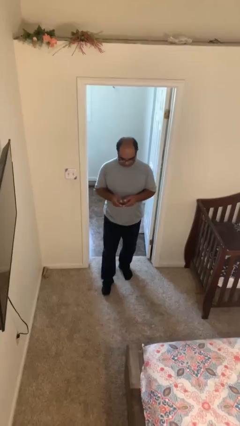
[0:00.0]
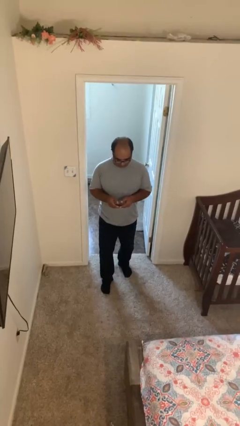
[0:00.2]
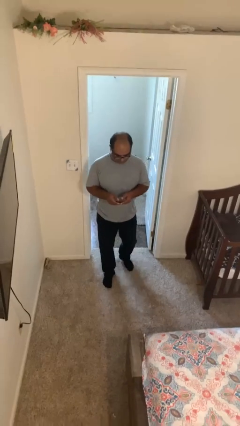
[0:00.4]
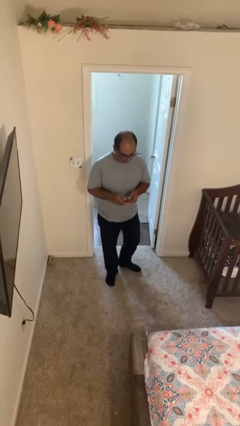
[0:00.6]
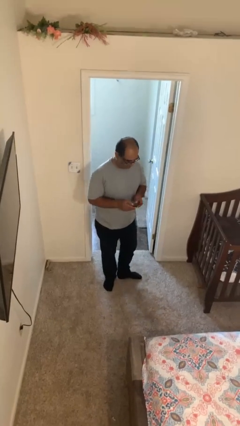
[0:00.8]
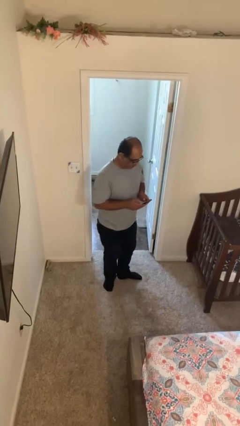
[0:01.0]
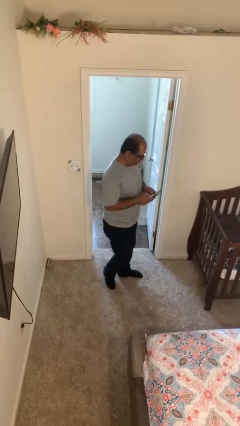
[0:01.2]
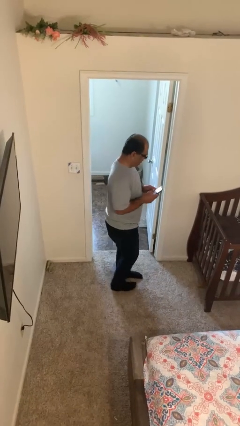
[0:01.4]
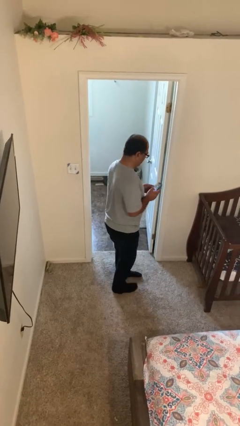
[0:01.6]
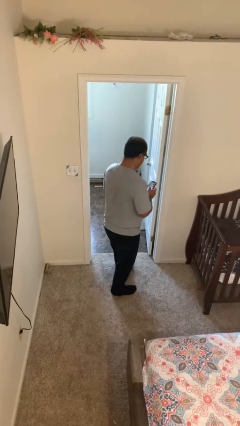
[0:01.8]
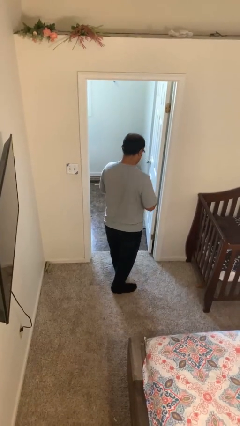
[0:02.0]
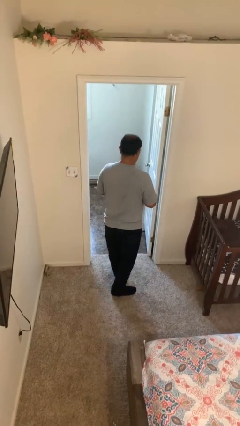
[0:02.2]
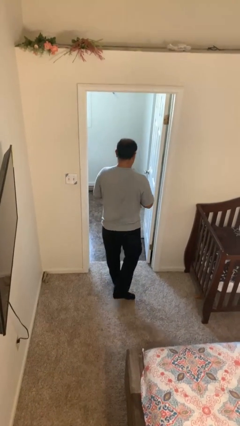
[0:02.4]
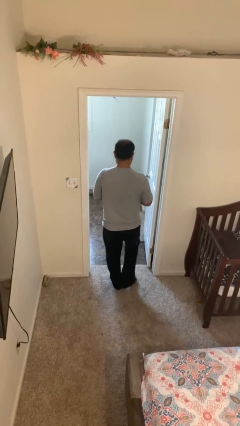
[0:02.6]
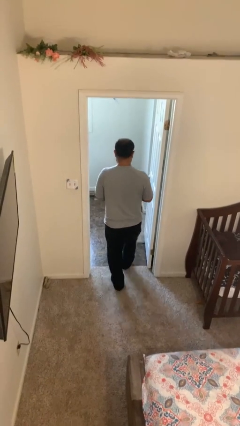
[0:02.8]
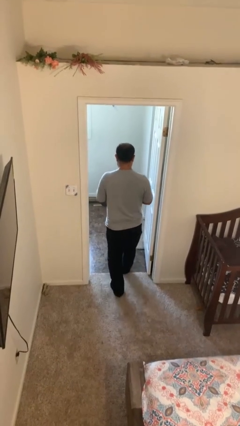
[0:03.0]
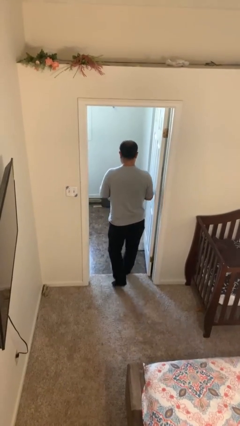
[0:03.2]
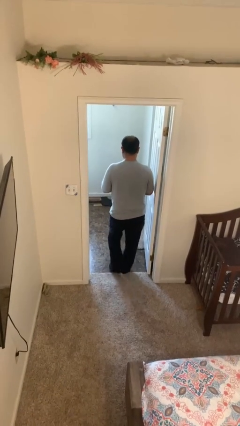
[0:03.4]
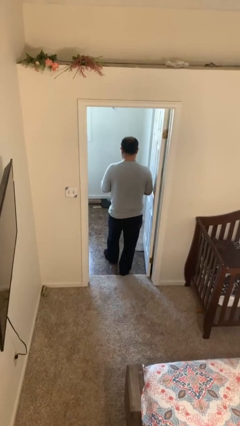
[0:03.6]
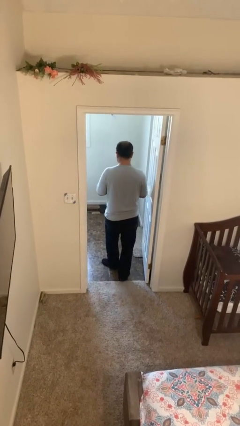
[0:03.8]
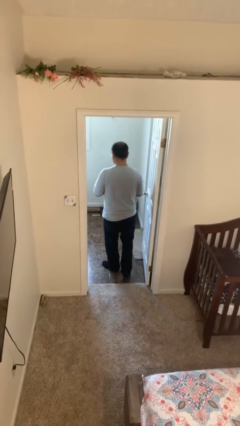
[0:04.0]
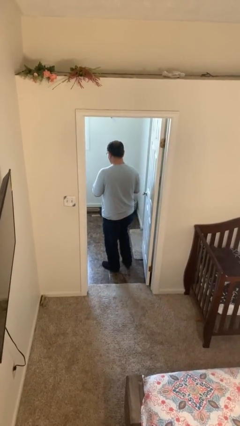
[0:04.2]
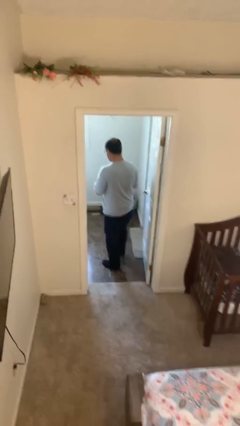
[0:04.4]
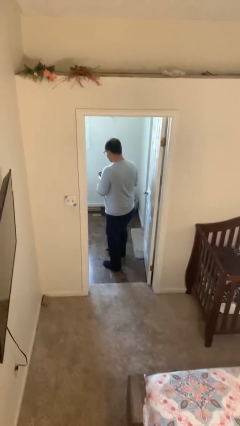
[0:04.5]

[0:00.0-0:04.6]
person exits scene through structure

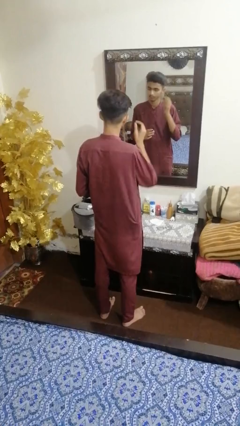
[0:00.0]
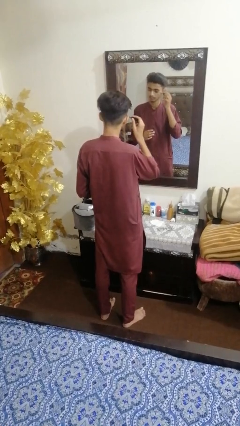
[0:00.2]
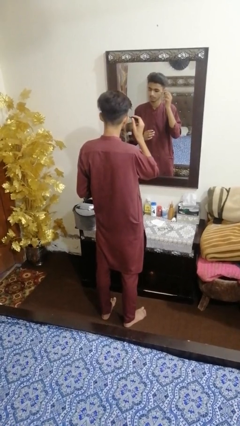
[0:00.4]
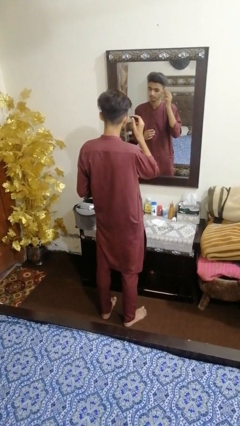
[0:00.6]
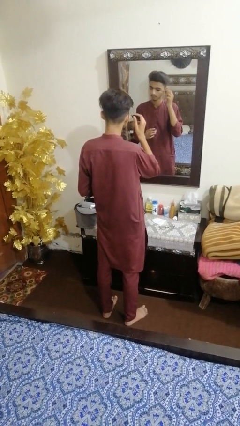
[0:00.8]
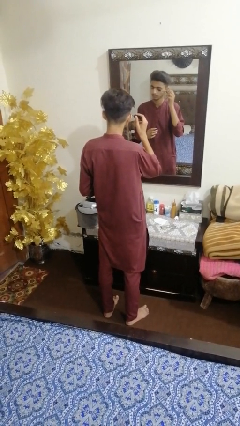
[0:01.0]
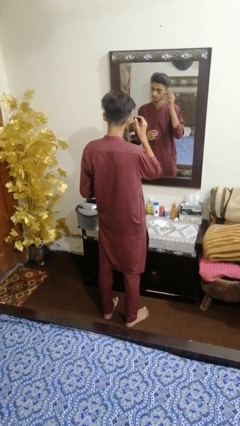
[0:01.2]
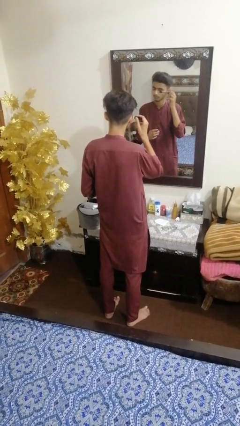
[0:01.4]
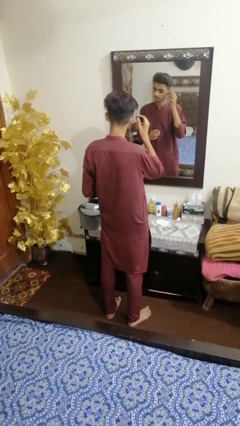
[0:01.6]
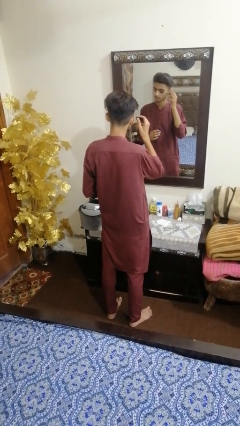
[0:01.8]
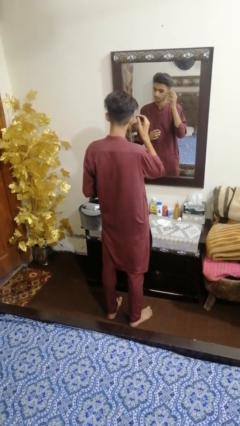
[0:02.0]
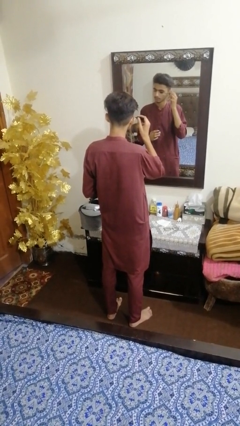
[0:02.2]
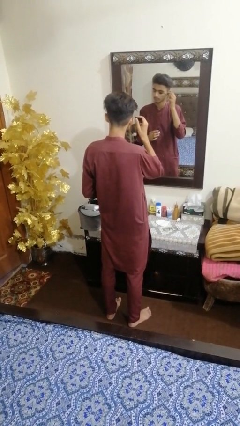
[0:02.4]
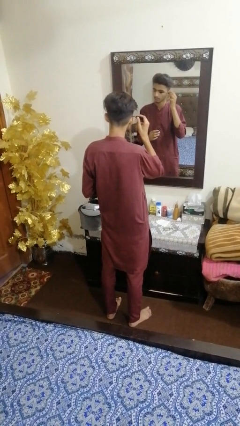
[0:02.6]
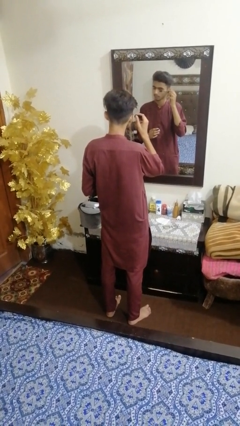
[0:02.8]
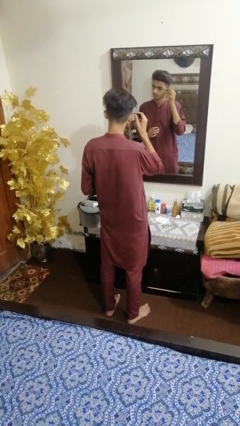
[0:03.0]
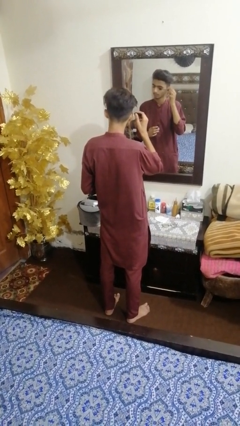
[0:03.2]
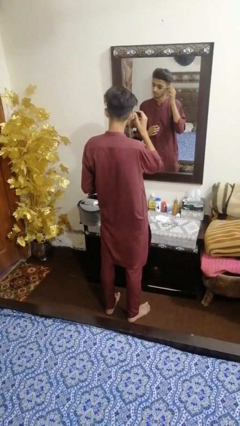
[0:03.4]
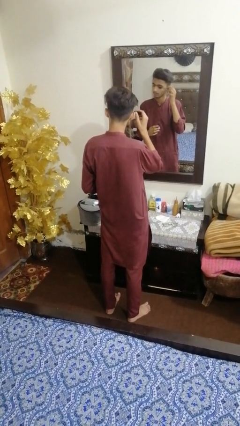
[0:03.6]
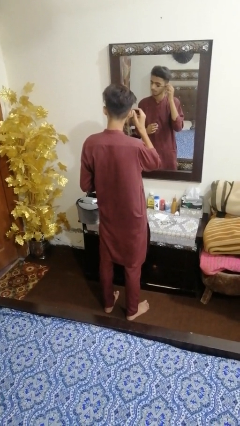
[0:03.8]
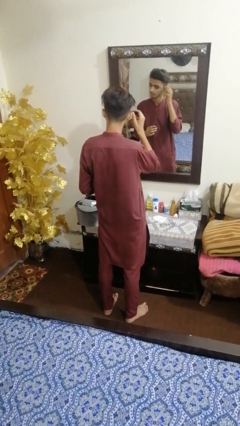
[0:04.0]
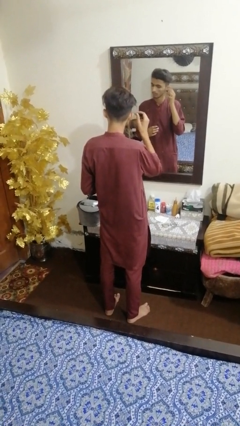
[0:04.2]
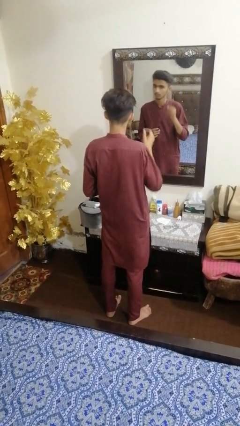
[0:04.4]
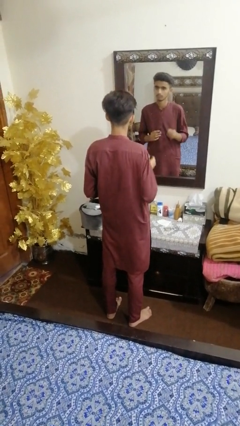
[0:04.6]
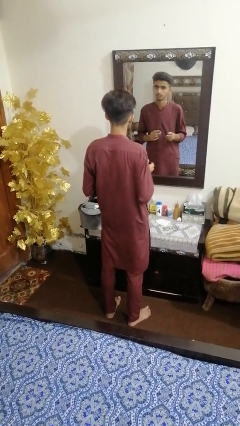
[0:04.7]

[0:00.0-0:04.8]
person applies eye makeup

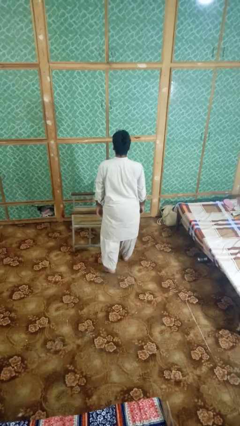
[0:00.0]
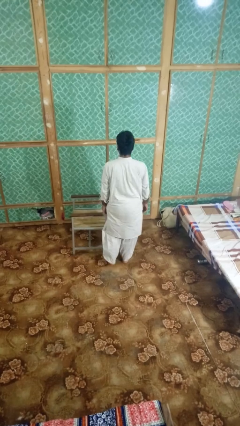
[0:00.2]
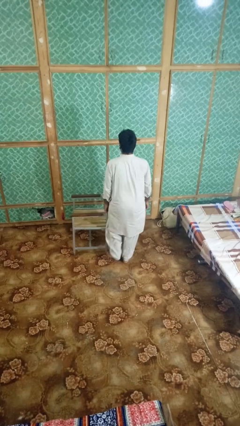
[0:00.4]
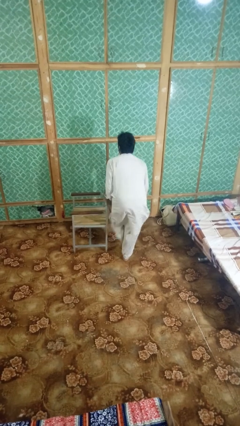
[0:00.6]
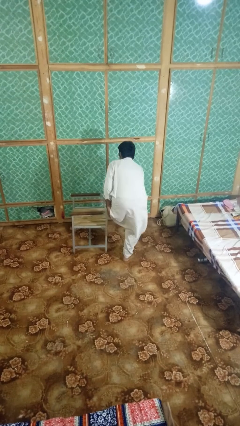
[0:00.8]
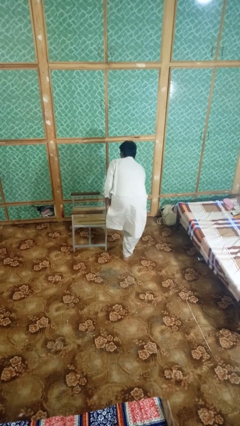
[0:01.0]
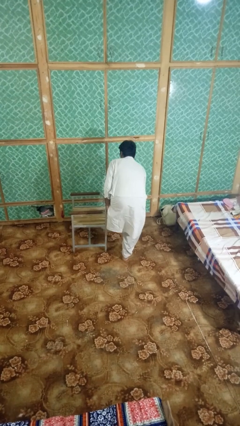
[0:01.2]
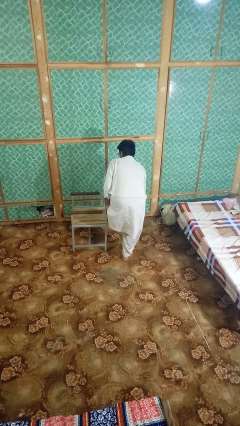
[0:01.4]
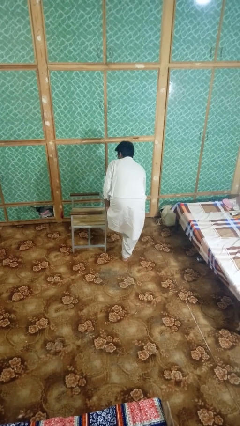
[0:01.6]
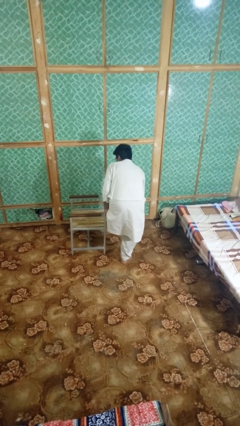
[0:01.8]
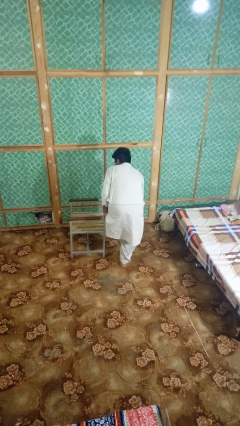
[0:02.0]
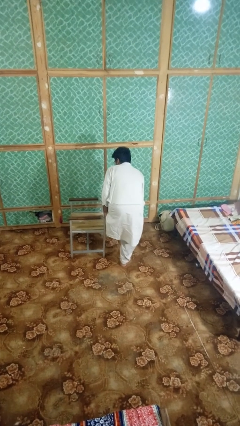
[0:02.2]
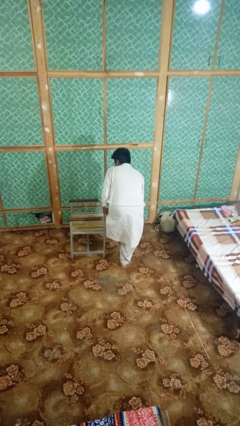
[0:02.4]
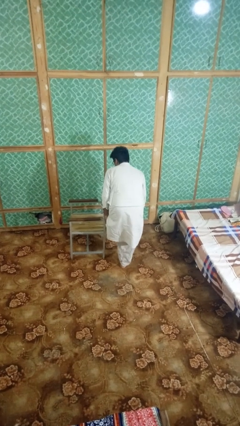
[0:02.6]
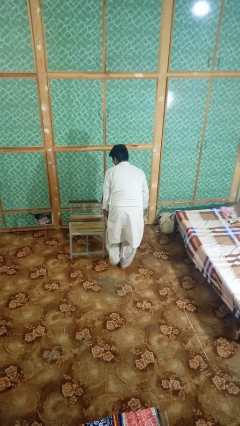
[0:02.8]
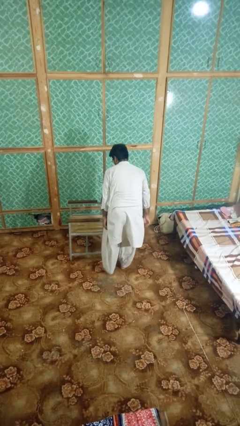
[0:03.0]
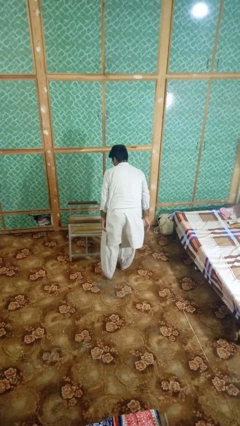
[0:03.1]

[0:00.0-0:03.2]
person stubs toe

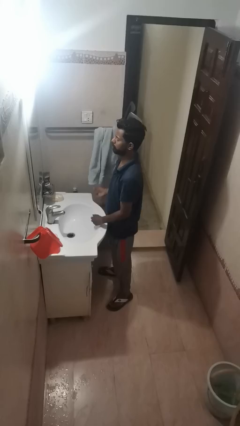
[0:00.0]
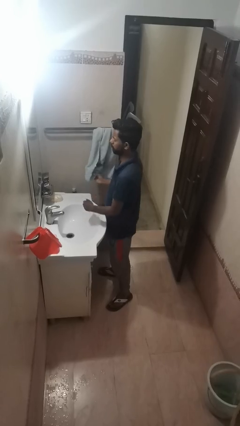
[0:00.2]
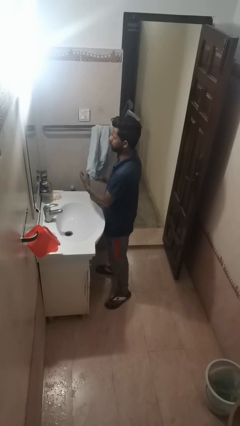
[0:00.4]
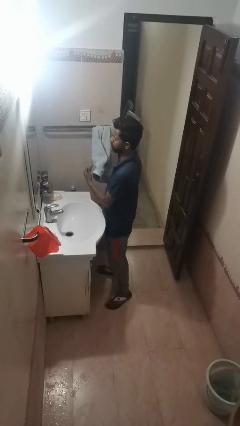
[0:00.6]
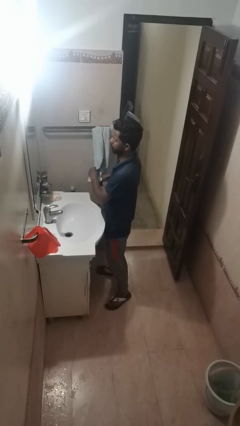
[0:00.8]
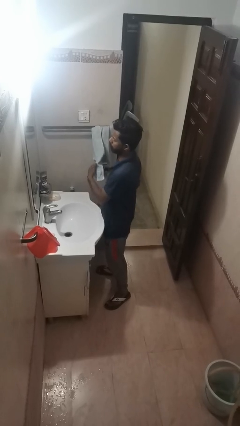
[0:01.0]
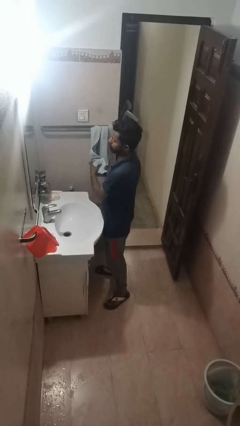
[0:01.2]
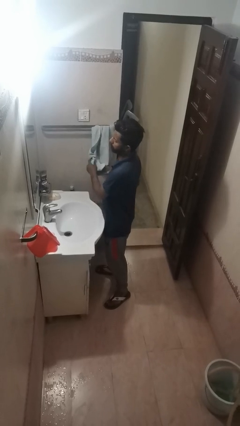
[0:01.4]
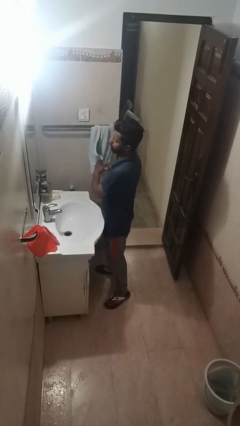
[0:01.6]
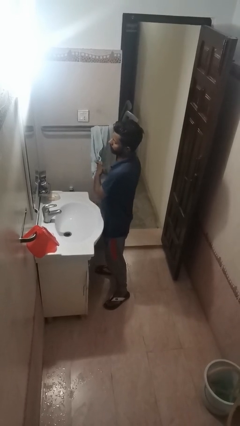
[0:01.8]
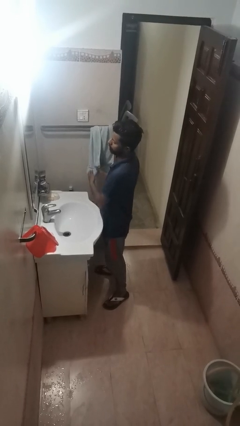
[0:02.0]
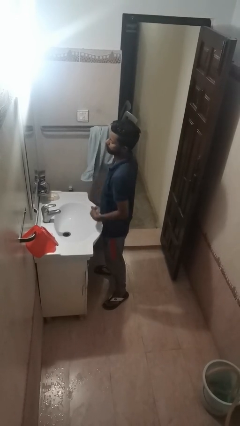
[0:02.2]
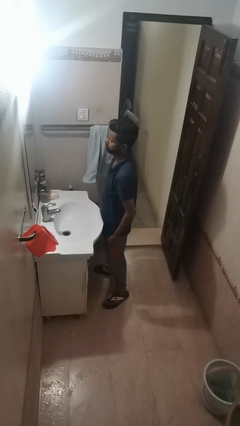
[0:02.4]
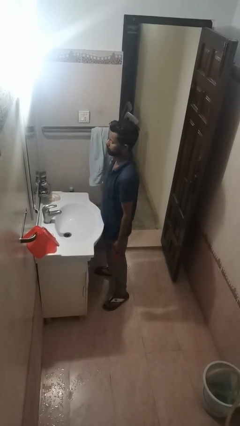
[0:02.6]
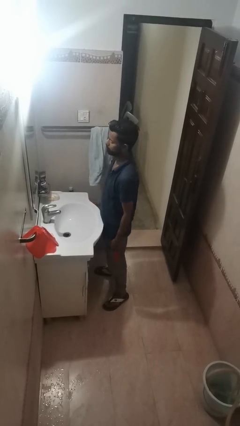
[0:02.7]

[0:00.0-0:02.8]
person dries face with towel

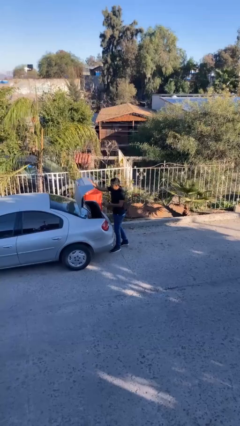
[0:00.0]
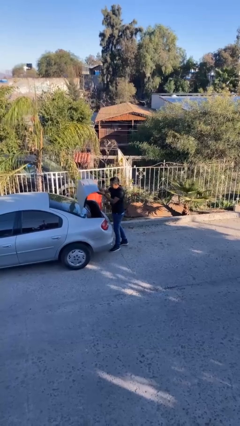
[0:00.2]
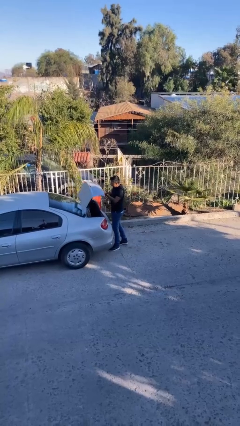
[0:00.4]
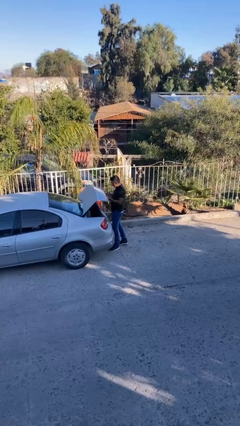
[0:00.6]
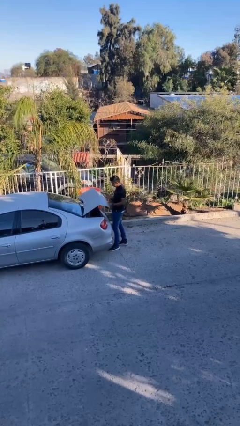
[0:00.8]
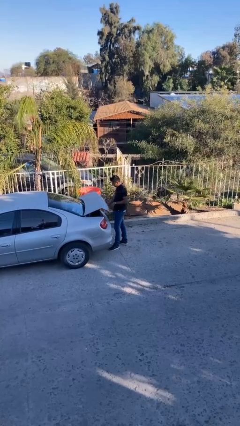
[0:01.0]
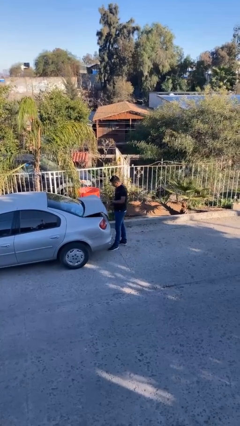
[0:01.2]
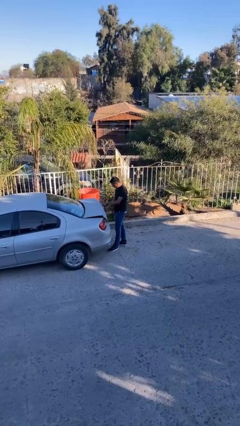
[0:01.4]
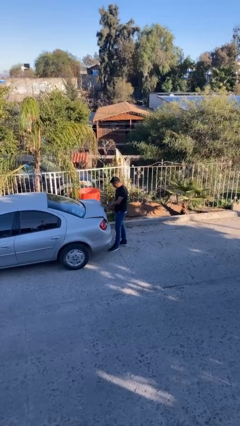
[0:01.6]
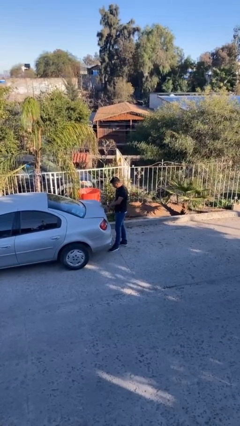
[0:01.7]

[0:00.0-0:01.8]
person closes car trunk
